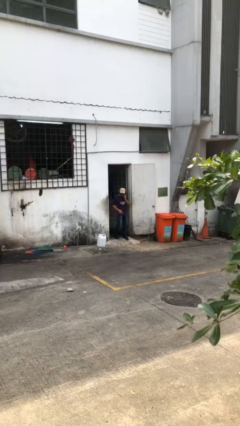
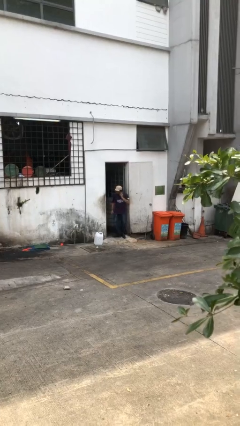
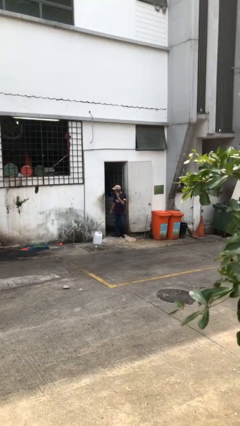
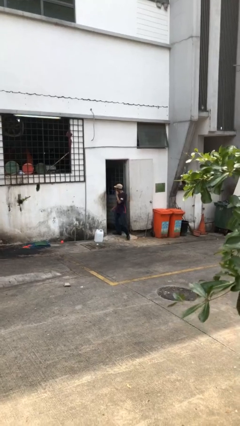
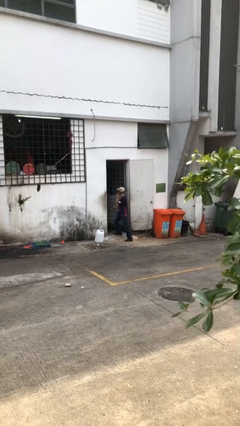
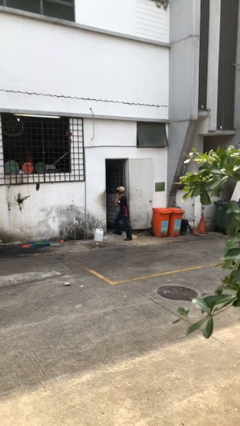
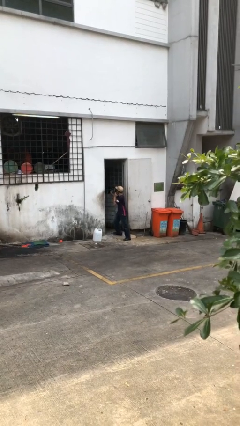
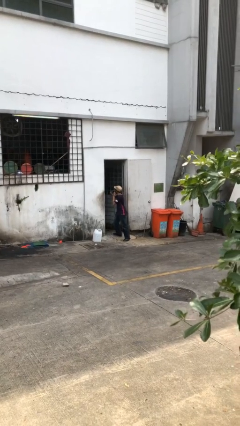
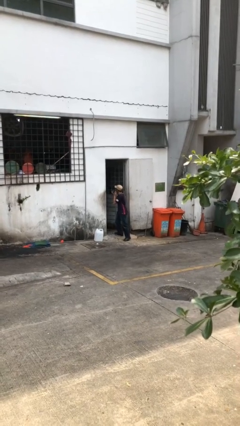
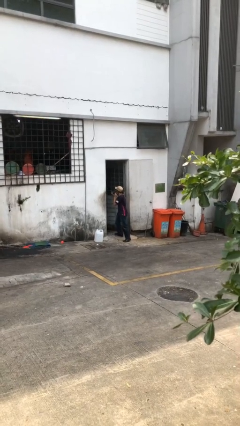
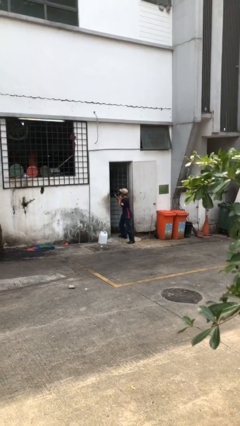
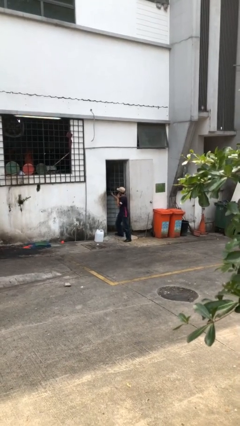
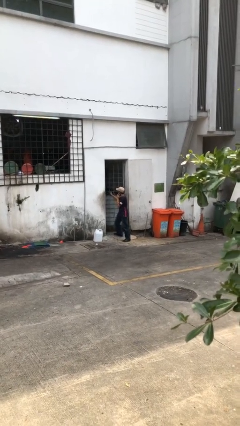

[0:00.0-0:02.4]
person enters scene through structure

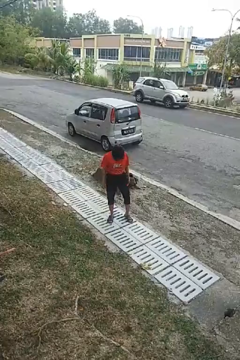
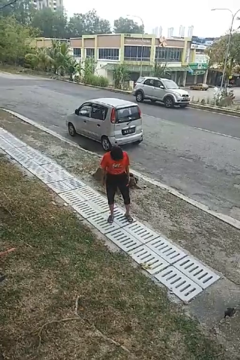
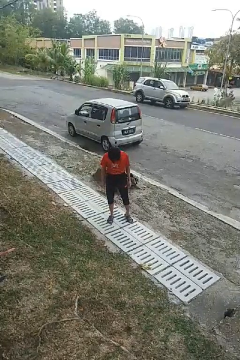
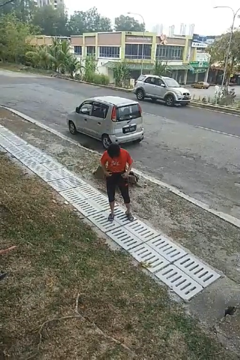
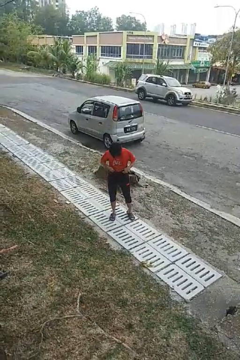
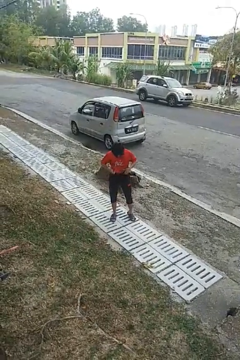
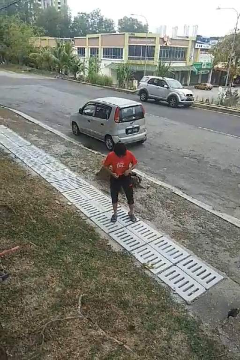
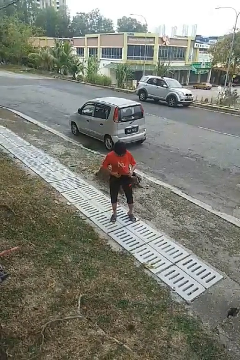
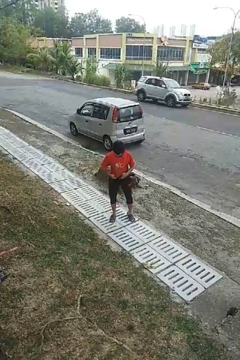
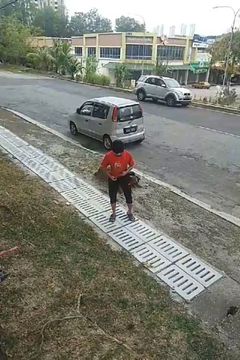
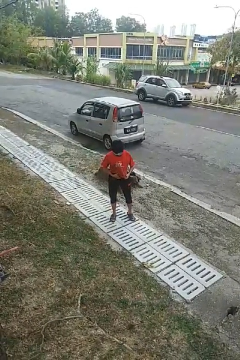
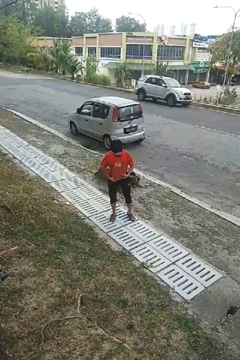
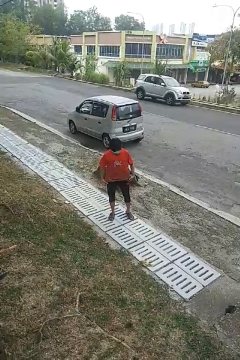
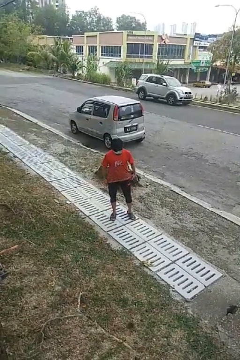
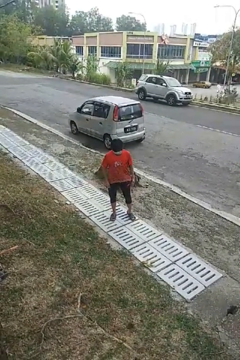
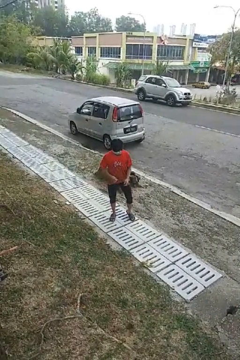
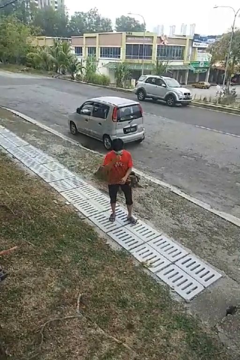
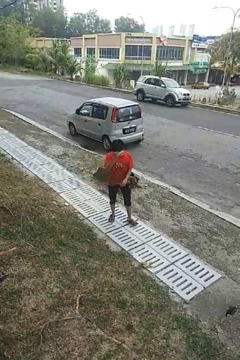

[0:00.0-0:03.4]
person untucks shirt

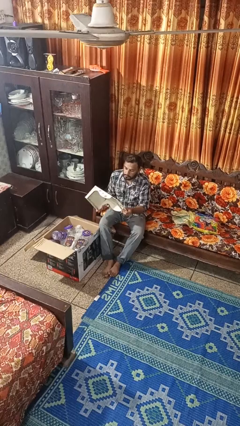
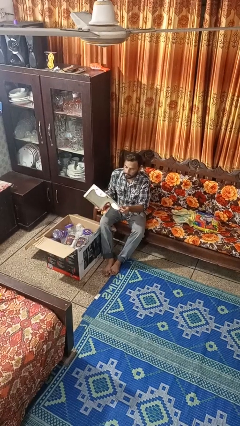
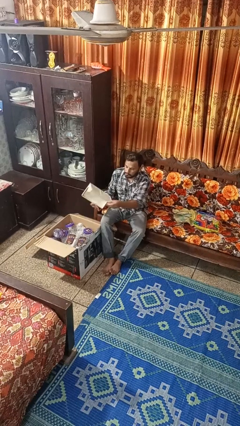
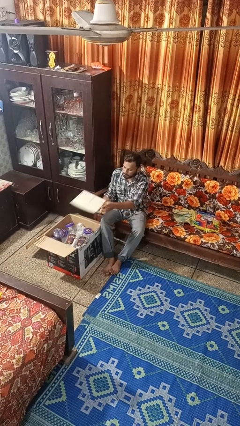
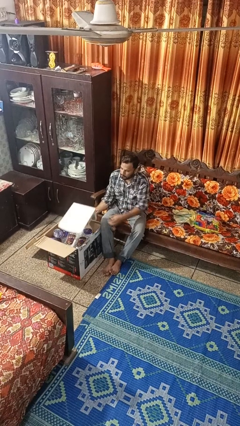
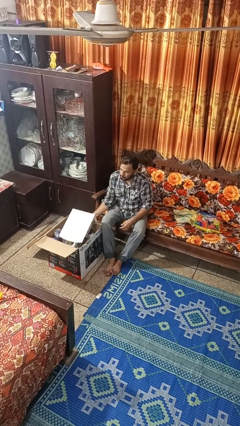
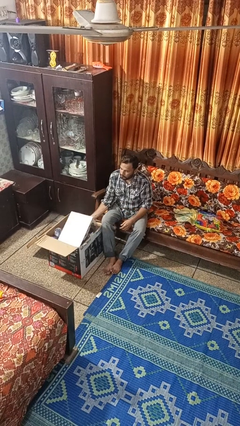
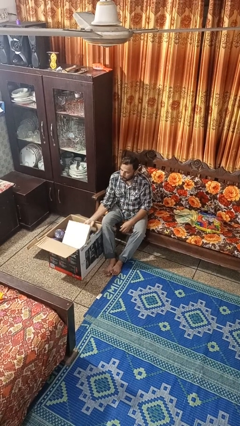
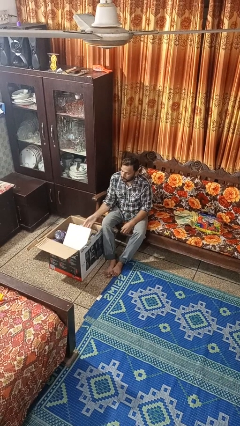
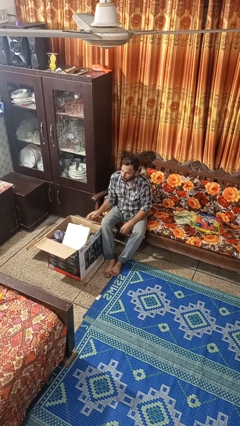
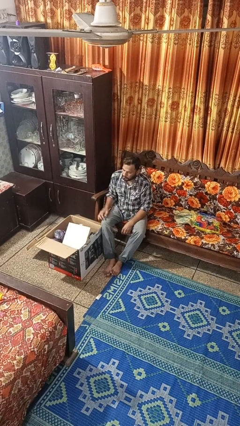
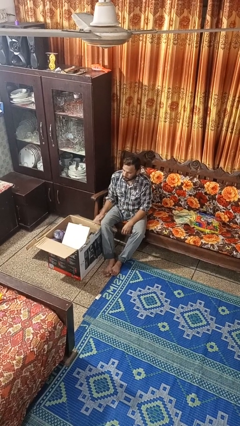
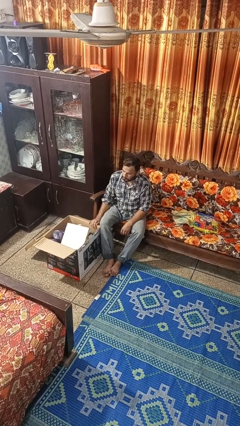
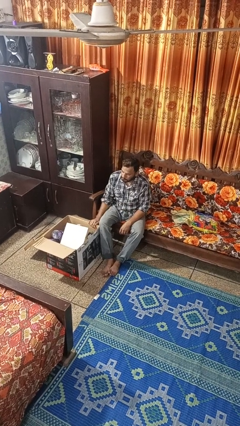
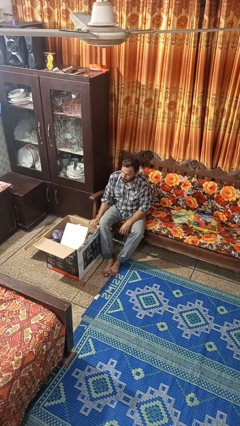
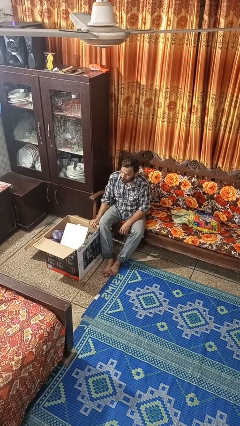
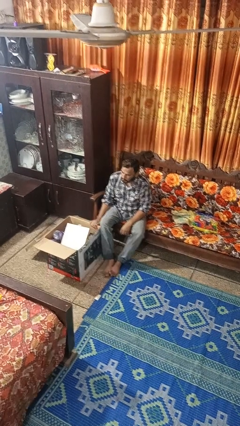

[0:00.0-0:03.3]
person puts object into box

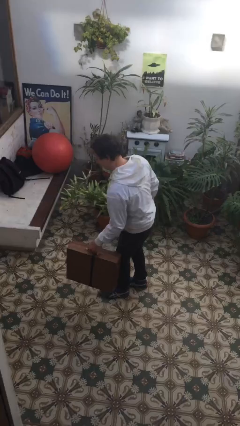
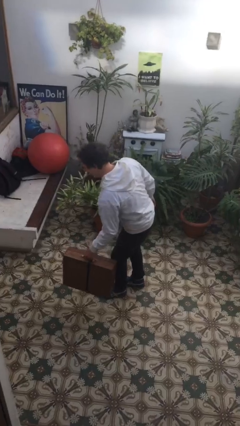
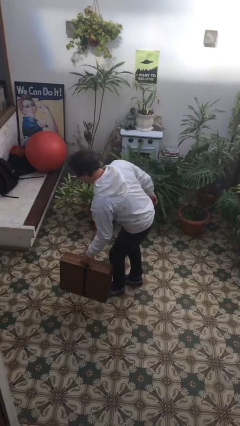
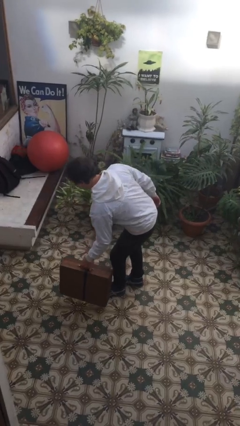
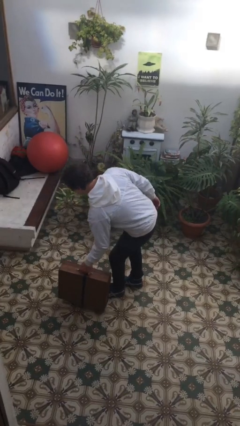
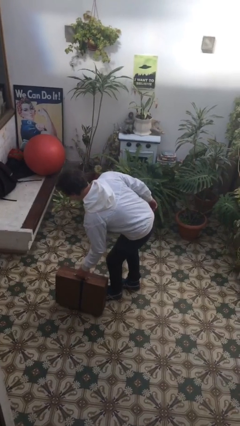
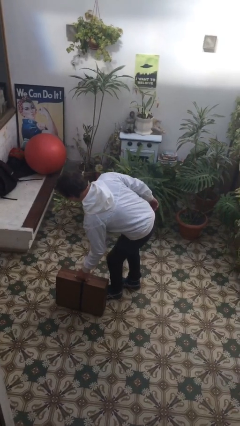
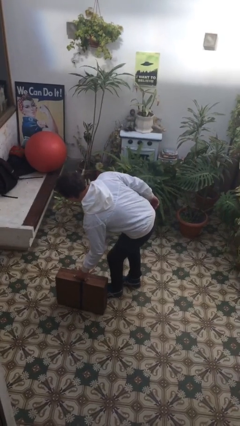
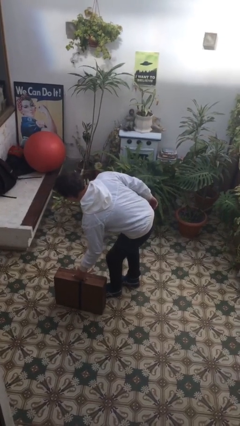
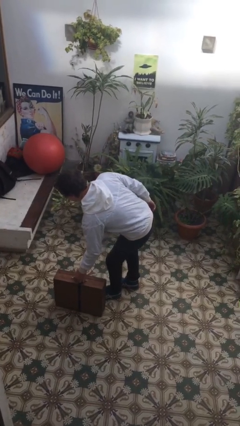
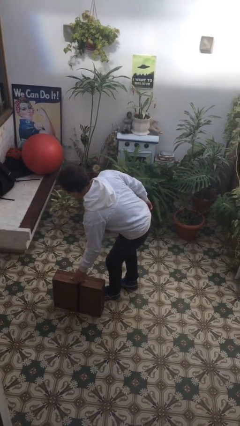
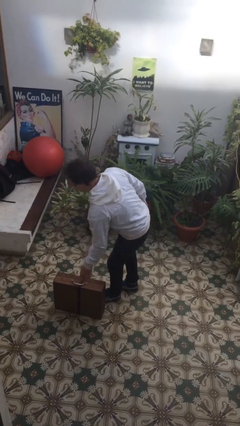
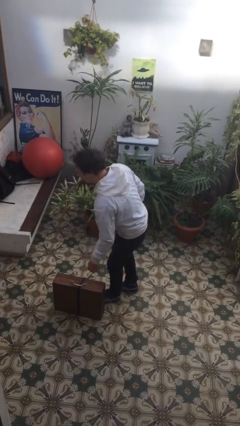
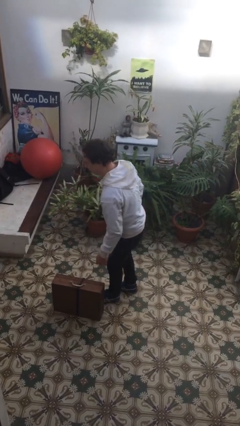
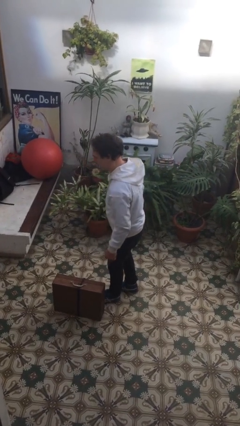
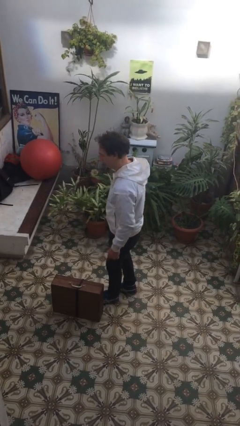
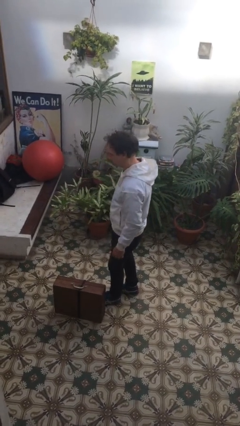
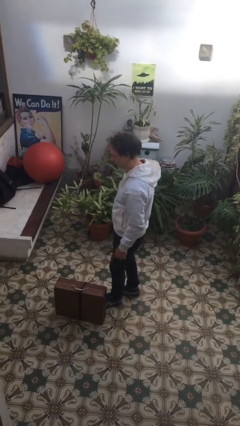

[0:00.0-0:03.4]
person puts down object on floor

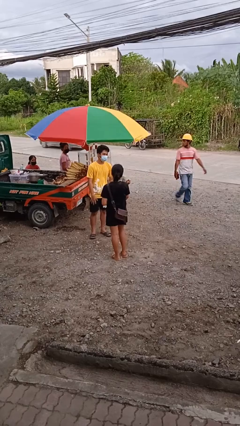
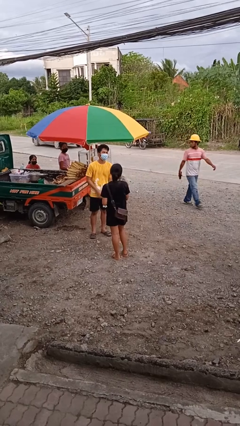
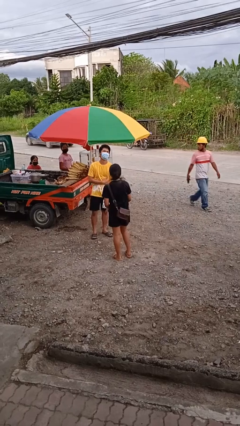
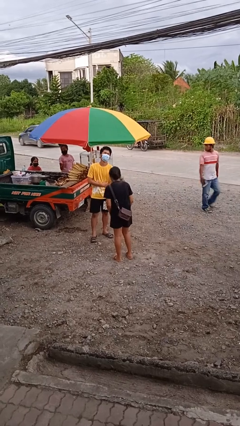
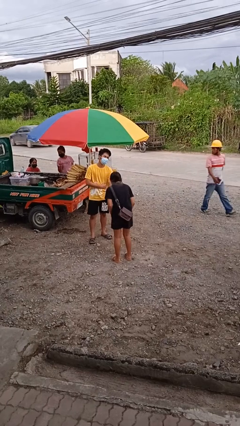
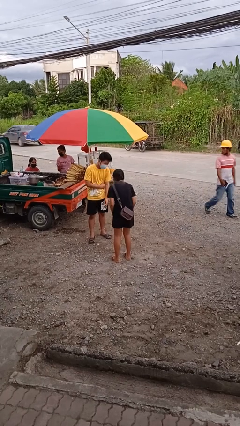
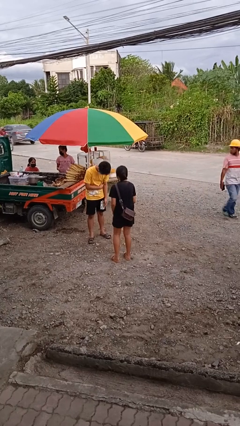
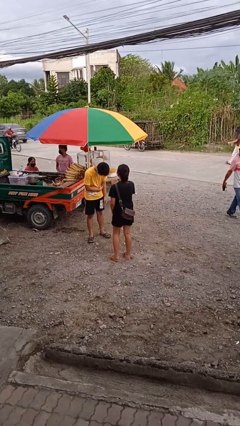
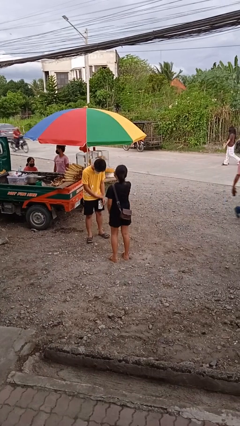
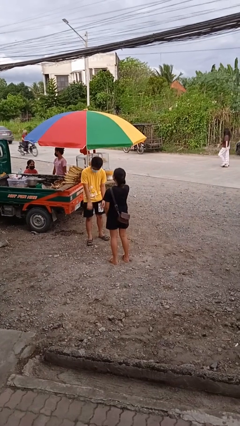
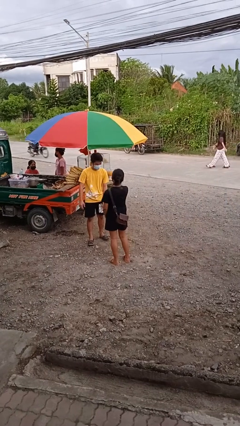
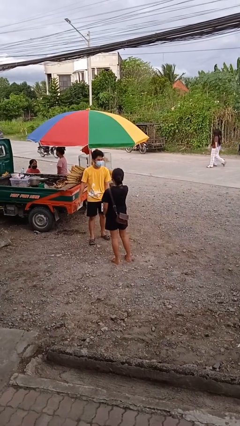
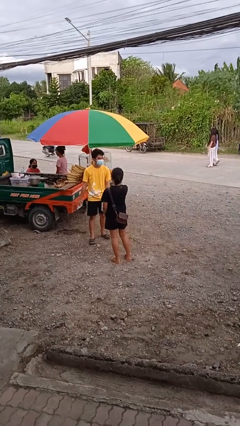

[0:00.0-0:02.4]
person laughs with person

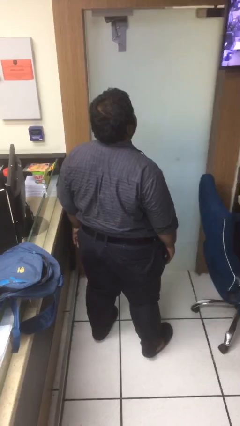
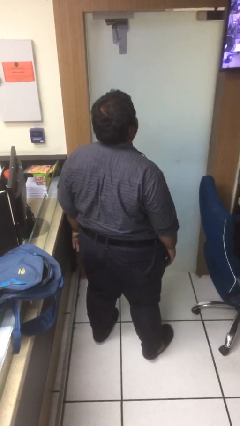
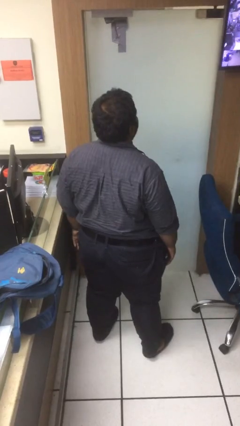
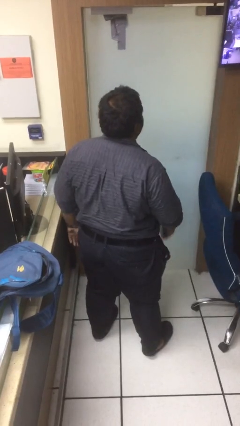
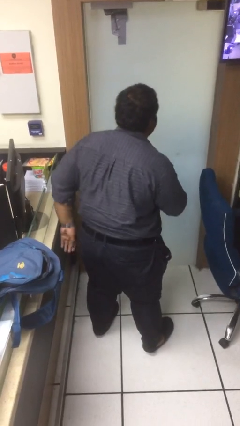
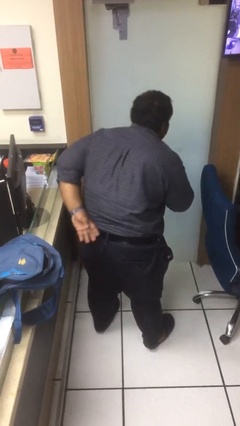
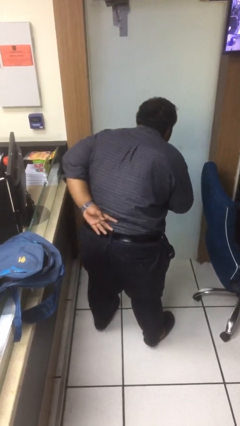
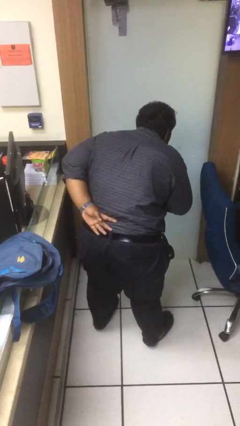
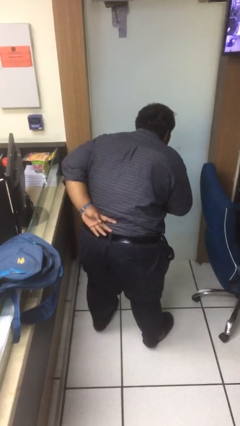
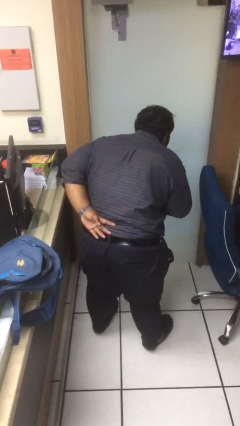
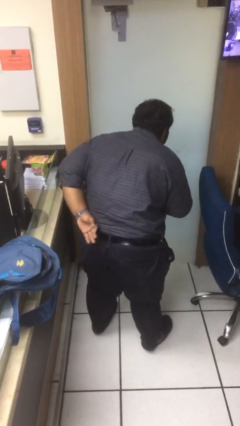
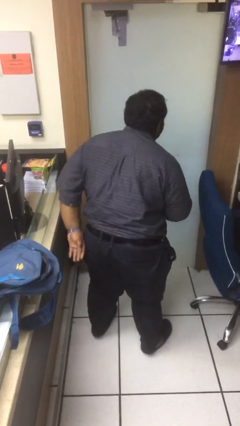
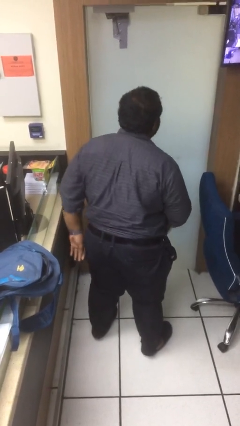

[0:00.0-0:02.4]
person bows

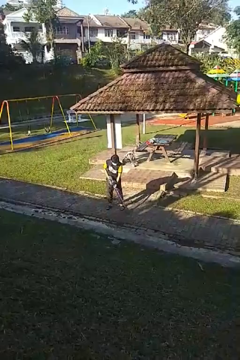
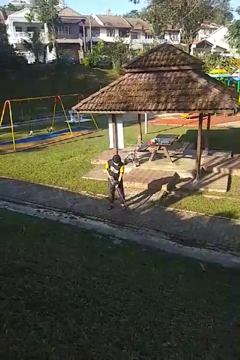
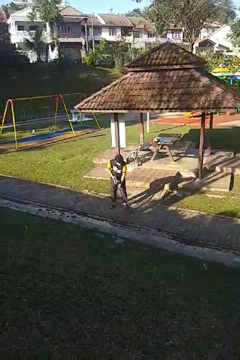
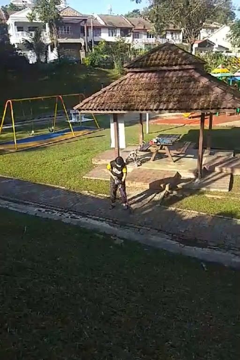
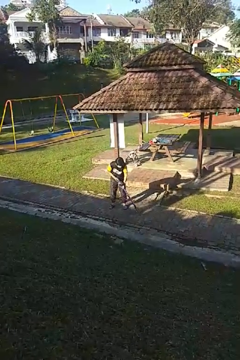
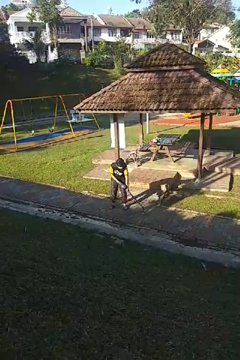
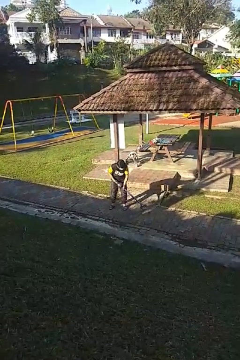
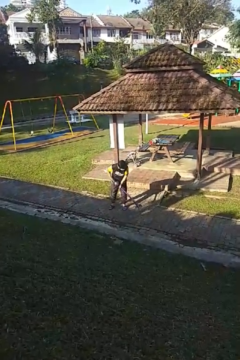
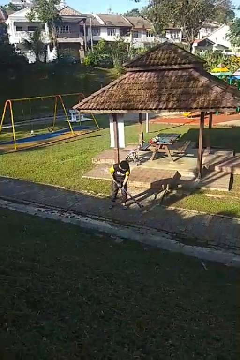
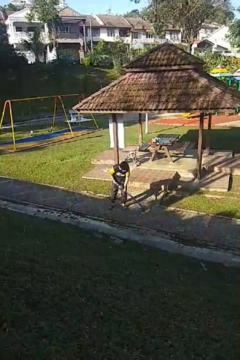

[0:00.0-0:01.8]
person vacuums carpet
